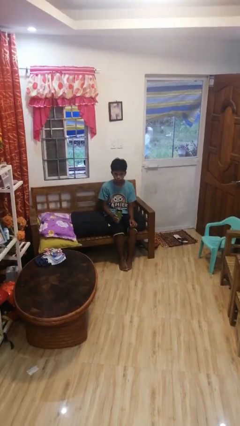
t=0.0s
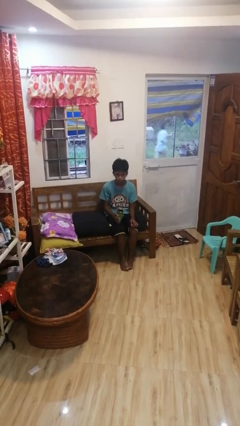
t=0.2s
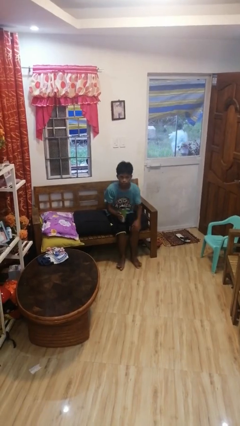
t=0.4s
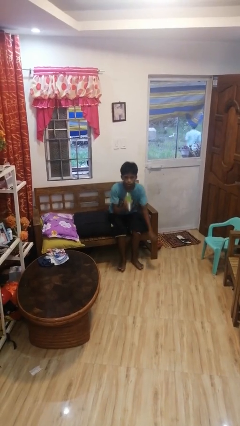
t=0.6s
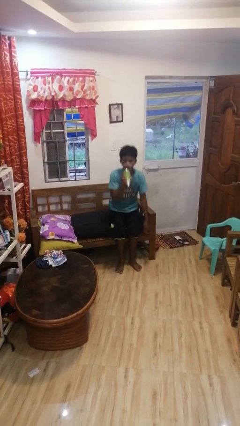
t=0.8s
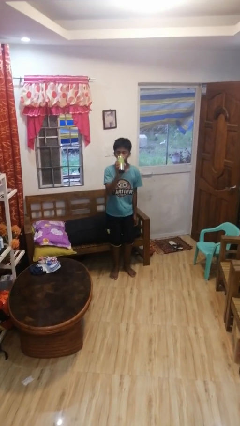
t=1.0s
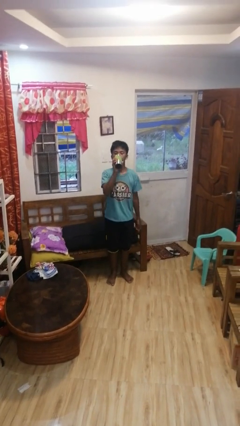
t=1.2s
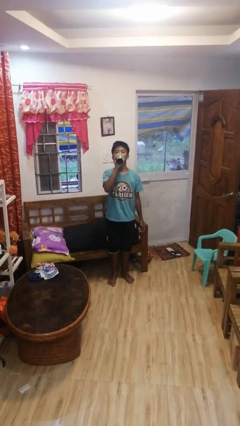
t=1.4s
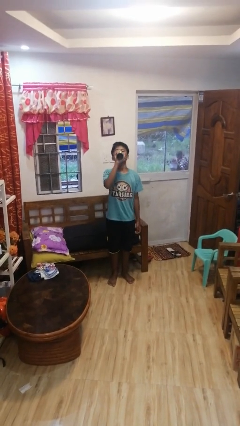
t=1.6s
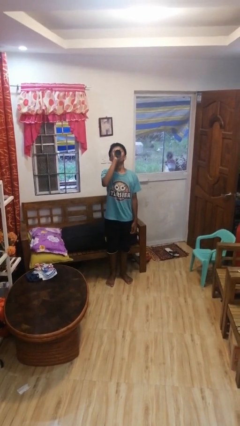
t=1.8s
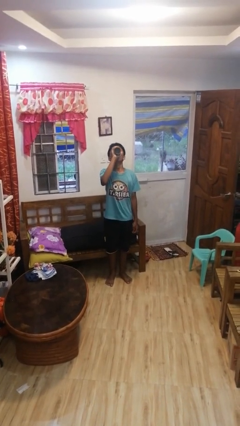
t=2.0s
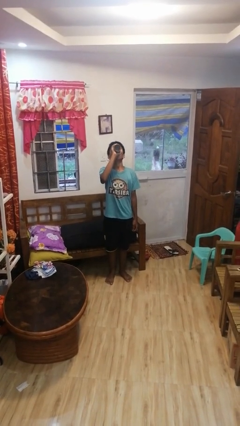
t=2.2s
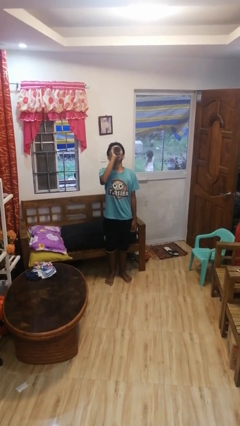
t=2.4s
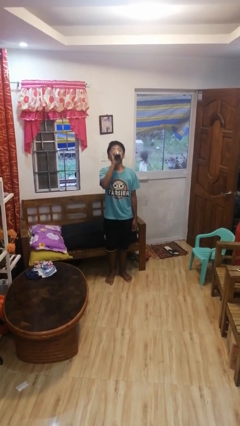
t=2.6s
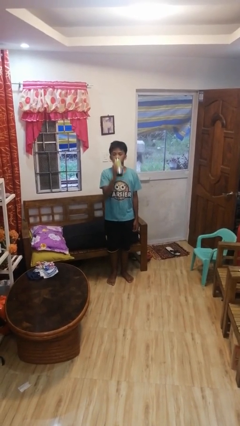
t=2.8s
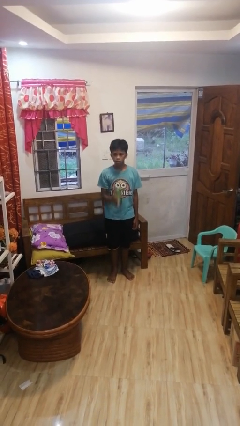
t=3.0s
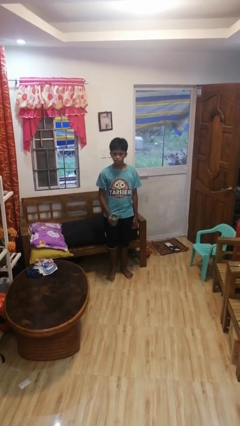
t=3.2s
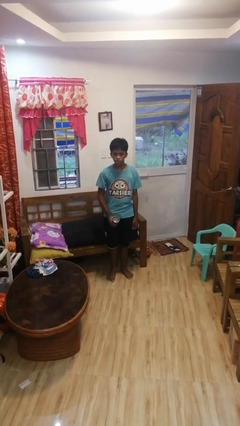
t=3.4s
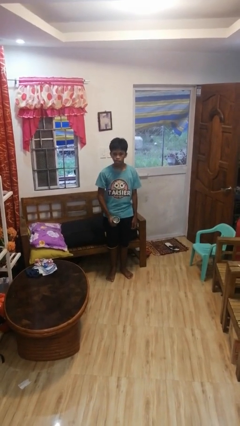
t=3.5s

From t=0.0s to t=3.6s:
person drinks from bottle

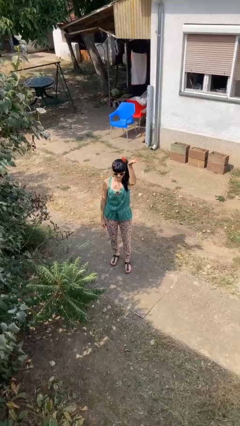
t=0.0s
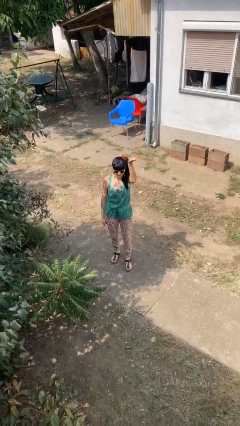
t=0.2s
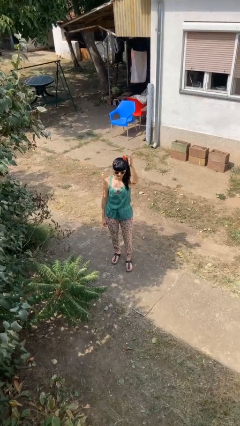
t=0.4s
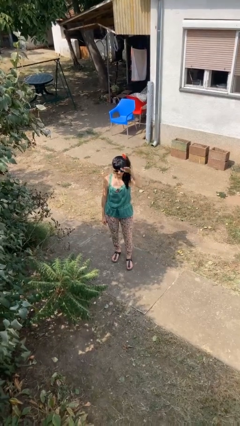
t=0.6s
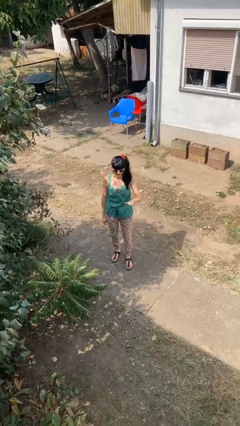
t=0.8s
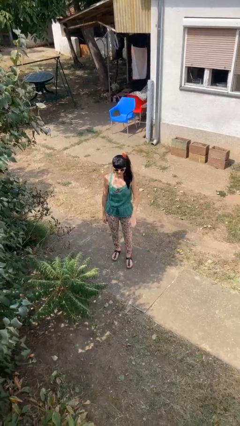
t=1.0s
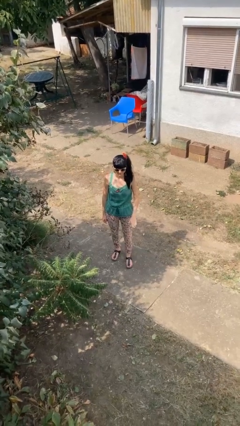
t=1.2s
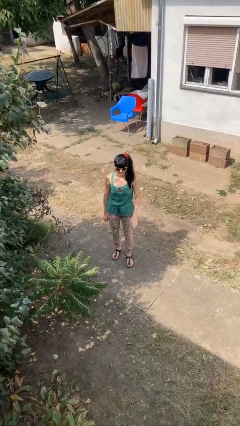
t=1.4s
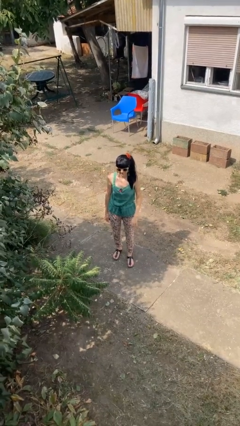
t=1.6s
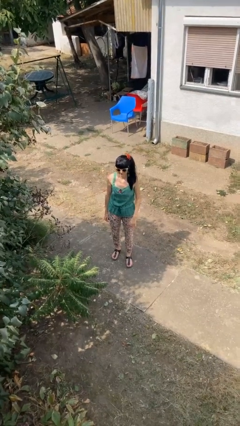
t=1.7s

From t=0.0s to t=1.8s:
person gestures swipe down

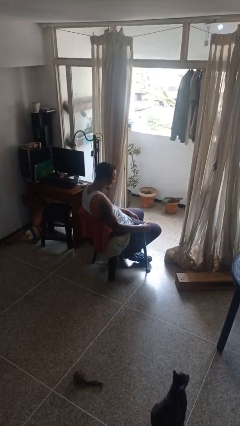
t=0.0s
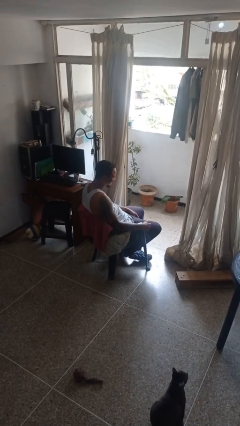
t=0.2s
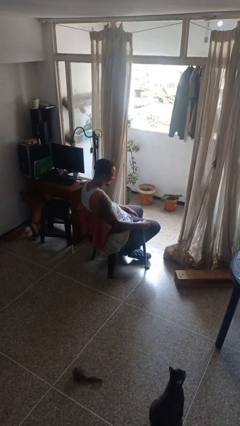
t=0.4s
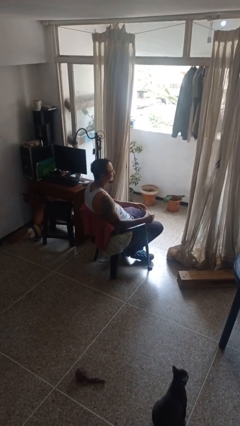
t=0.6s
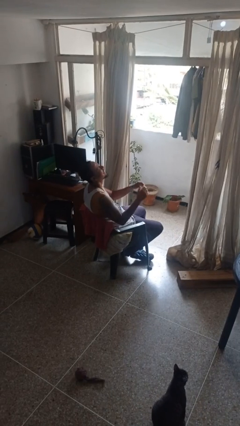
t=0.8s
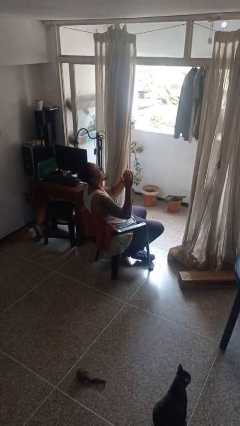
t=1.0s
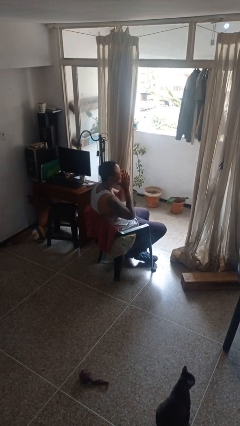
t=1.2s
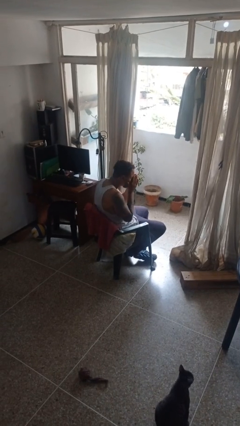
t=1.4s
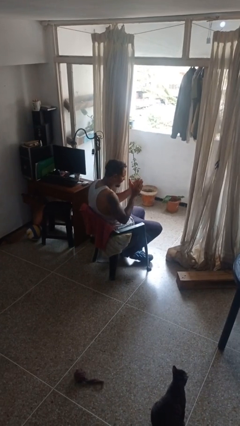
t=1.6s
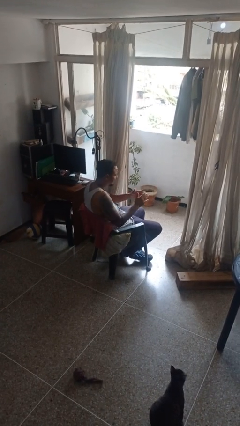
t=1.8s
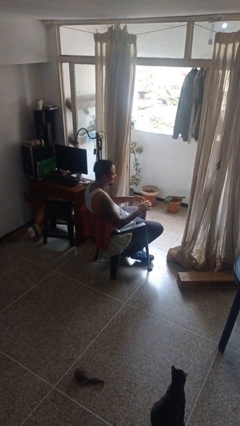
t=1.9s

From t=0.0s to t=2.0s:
person sneezes into hand

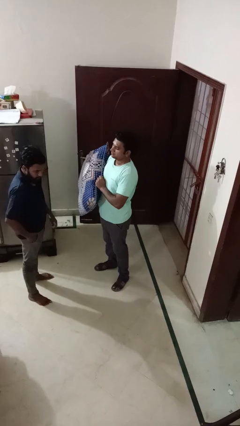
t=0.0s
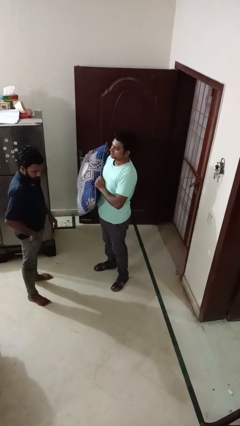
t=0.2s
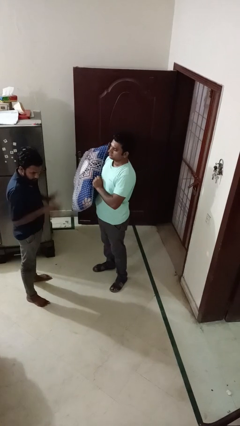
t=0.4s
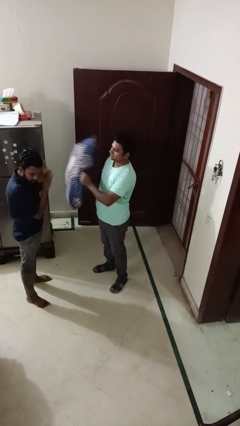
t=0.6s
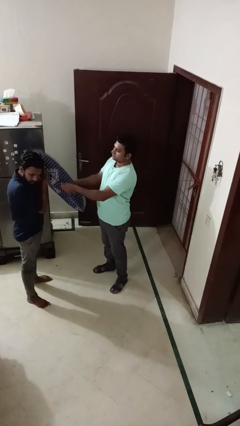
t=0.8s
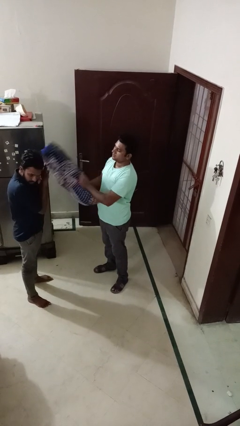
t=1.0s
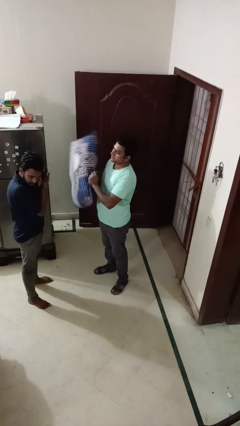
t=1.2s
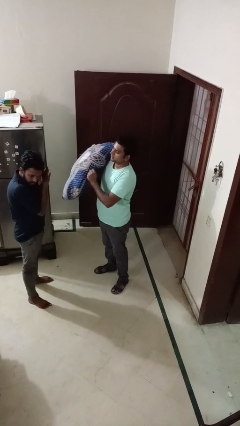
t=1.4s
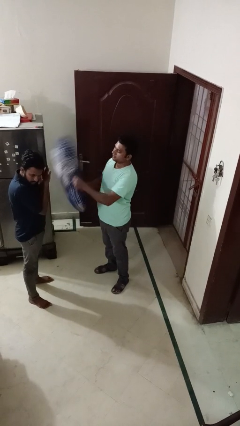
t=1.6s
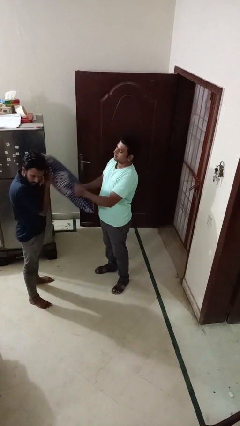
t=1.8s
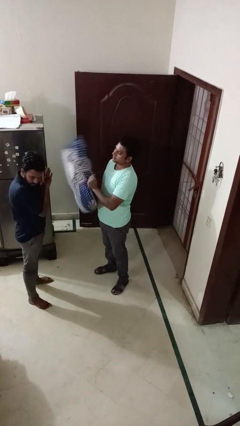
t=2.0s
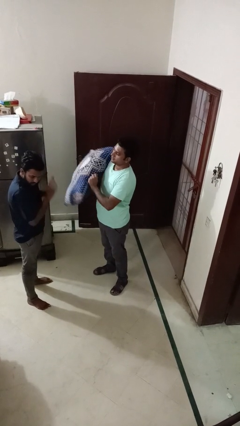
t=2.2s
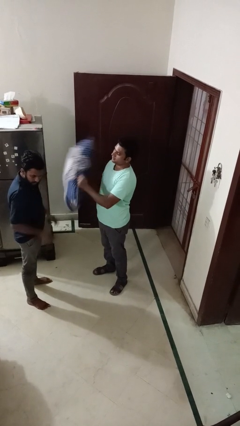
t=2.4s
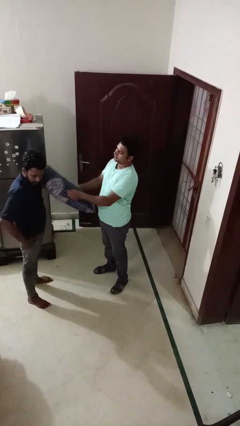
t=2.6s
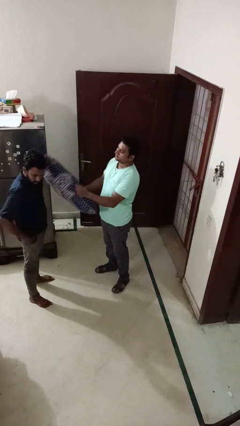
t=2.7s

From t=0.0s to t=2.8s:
person hits person with pillow

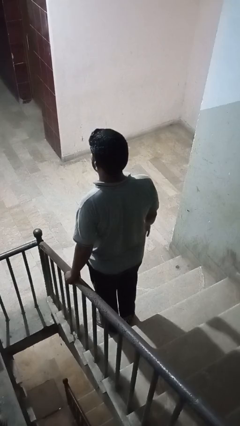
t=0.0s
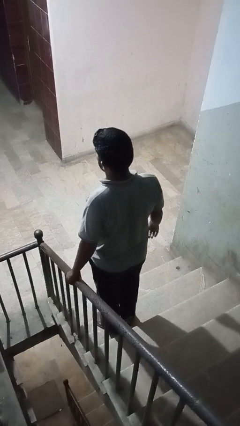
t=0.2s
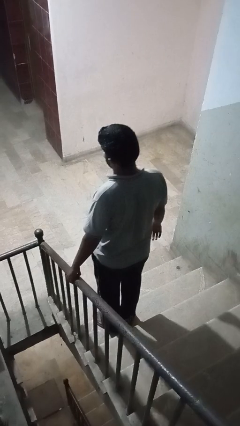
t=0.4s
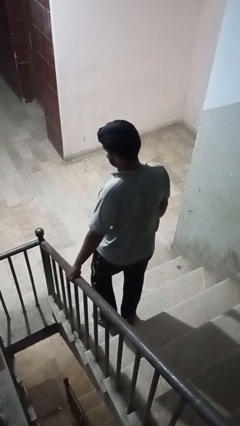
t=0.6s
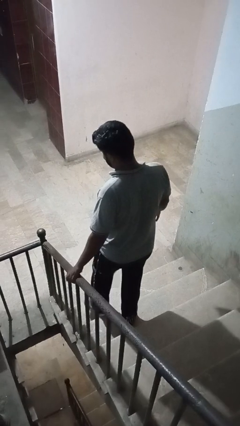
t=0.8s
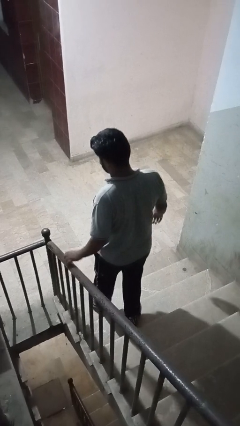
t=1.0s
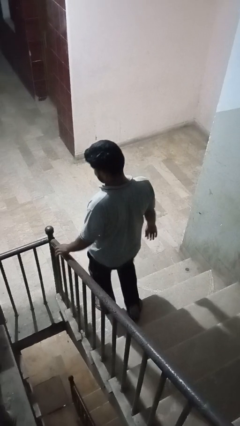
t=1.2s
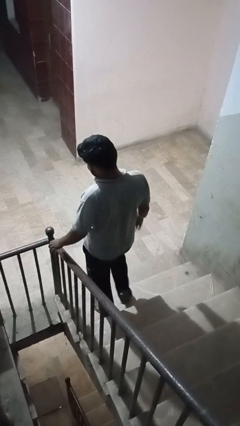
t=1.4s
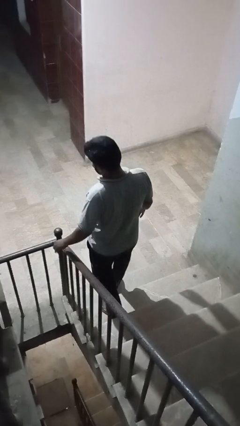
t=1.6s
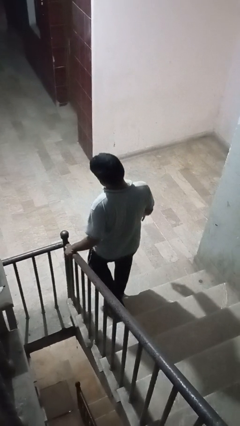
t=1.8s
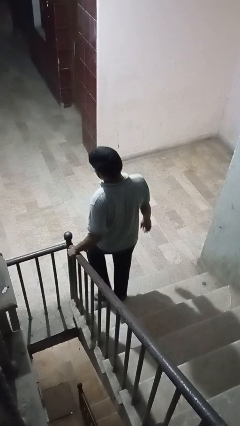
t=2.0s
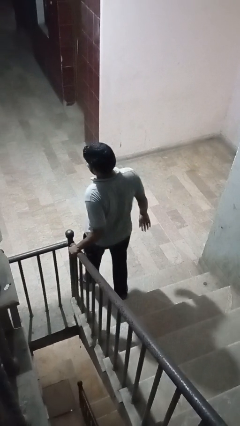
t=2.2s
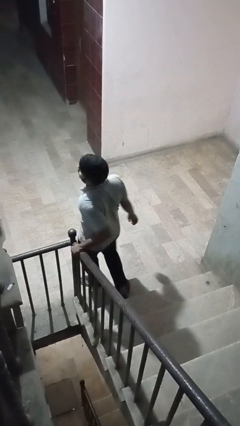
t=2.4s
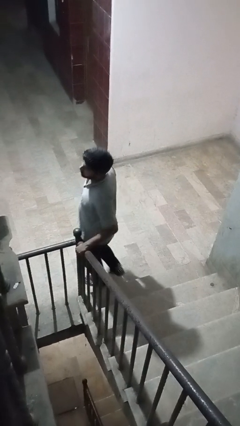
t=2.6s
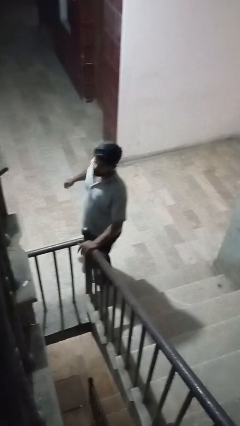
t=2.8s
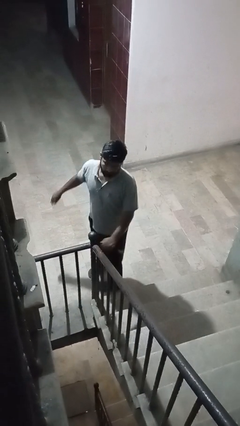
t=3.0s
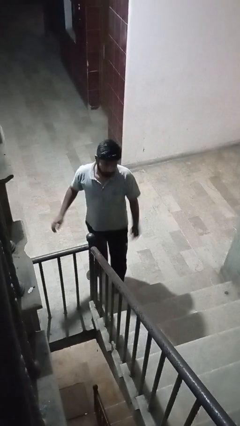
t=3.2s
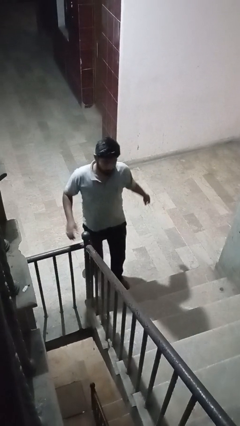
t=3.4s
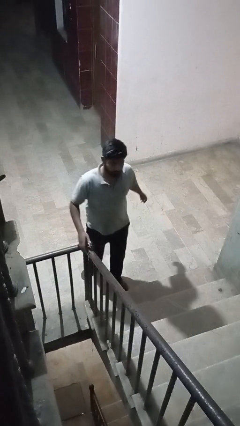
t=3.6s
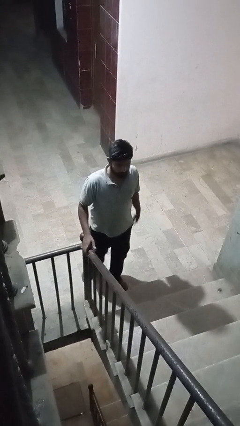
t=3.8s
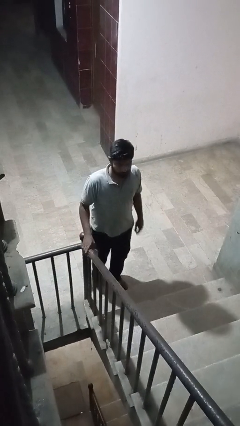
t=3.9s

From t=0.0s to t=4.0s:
person climbs down stairs

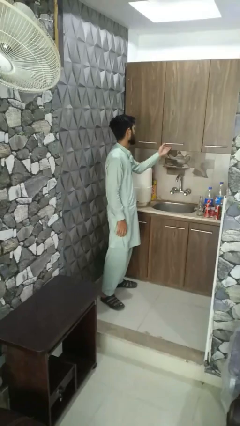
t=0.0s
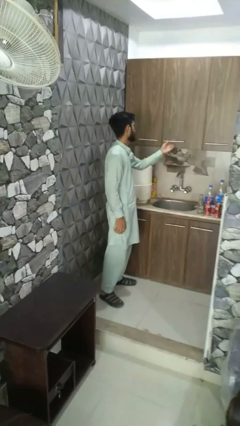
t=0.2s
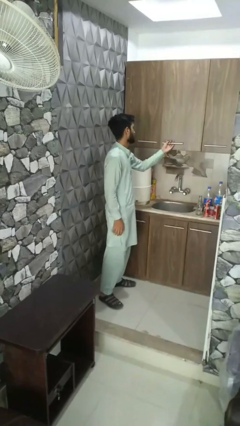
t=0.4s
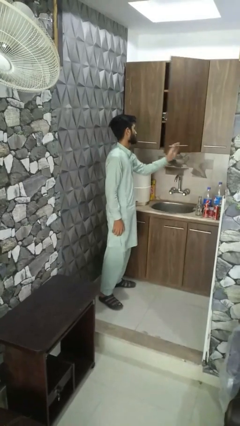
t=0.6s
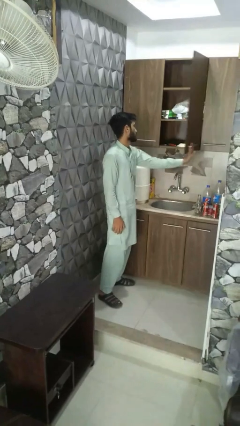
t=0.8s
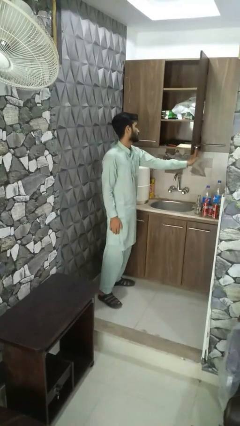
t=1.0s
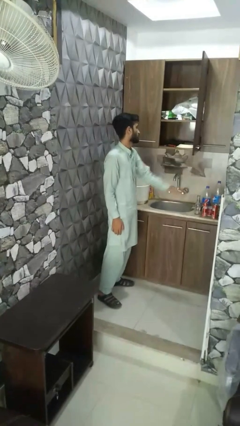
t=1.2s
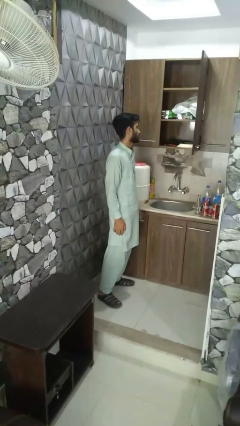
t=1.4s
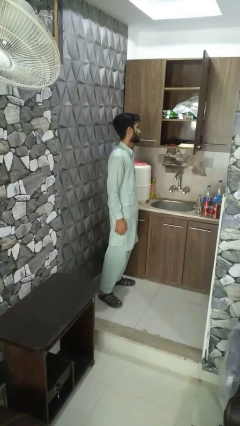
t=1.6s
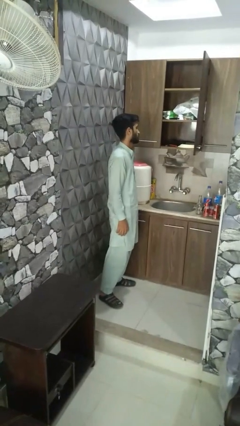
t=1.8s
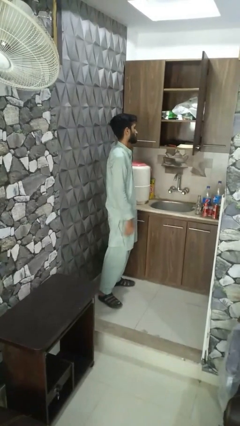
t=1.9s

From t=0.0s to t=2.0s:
person opens cabinet

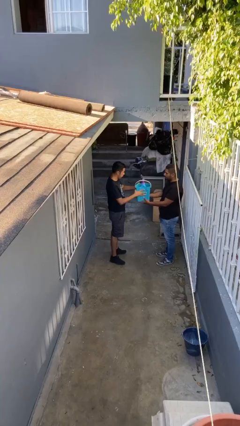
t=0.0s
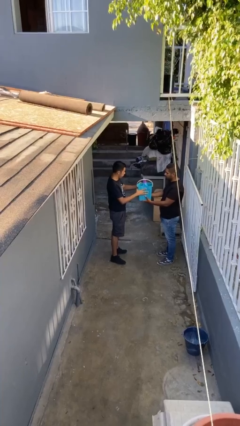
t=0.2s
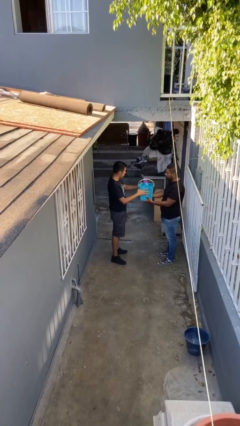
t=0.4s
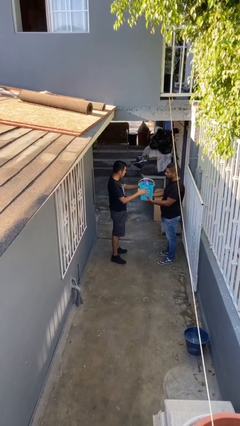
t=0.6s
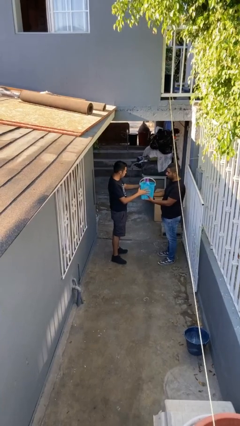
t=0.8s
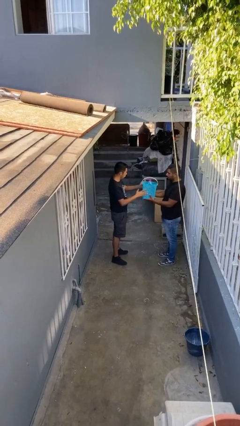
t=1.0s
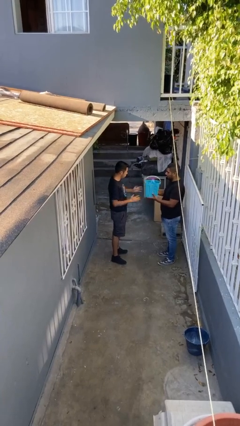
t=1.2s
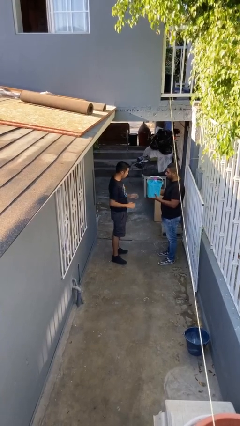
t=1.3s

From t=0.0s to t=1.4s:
person transfers object to person
